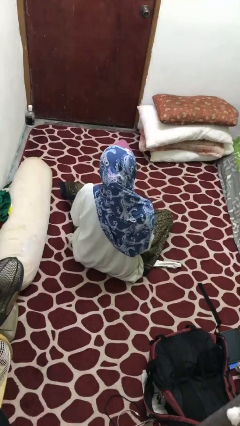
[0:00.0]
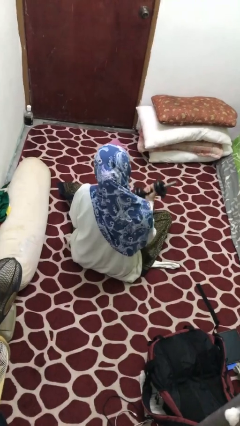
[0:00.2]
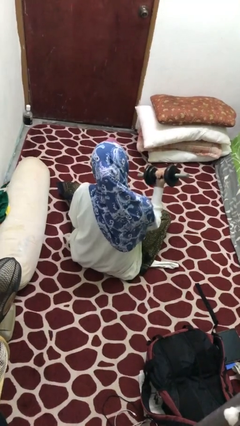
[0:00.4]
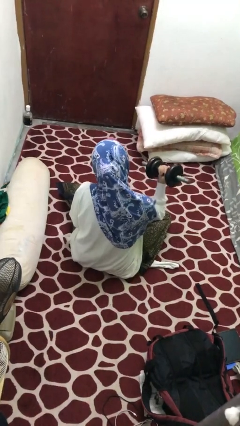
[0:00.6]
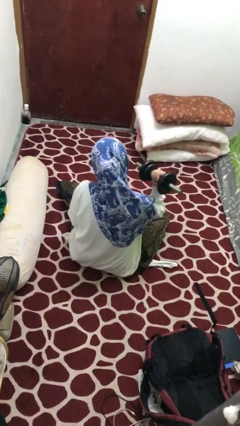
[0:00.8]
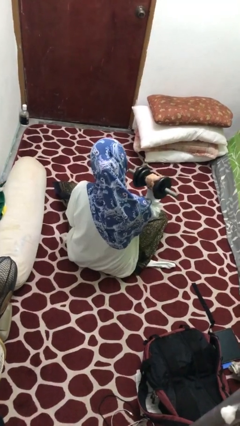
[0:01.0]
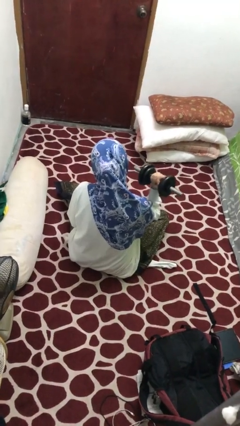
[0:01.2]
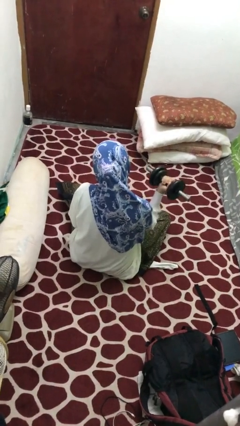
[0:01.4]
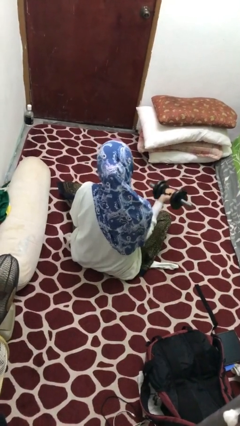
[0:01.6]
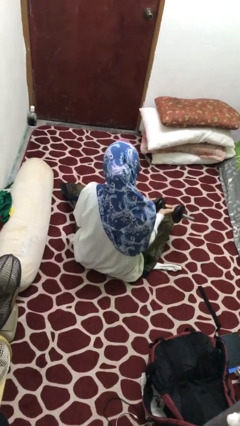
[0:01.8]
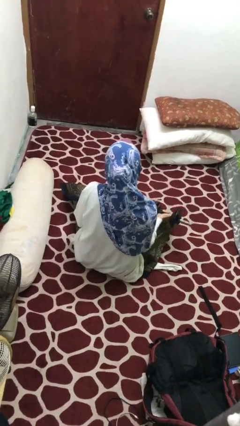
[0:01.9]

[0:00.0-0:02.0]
person lifts dumbbells

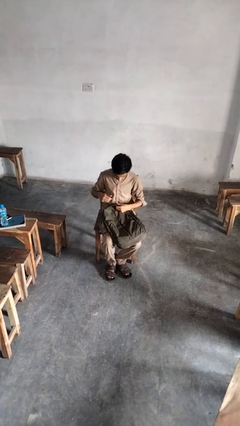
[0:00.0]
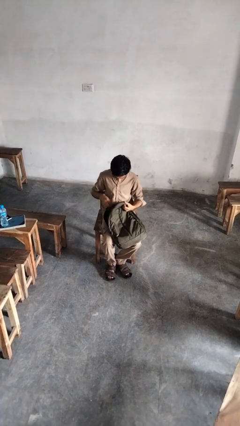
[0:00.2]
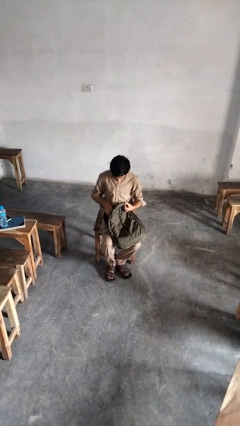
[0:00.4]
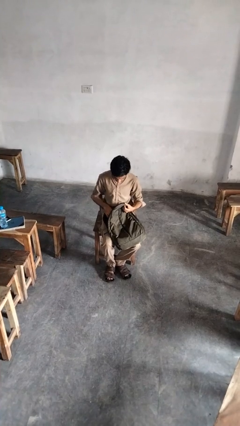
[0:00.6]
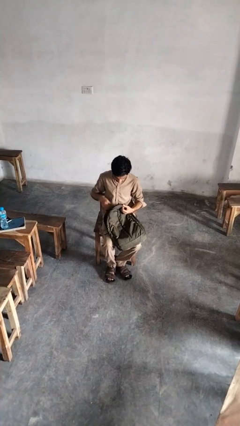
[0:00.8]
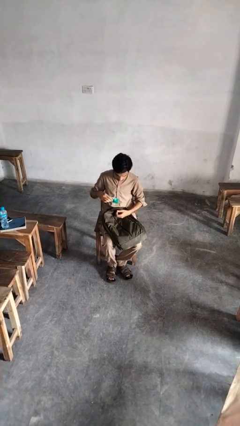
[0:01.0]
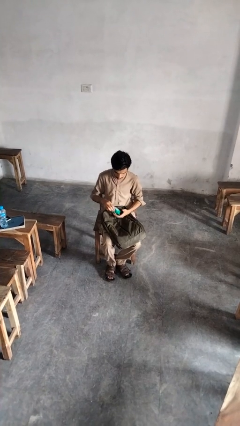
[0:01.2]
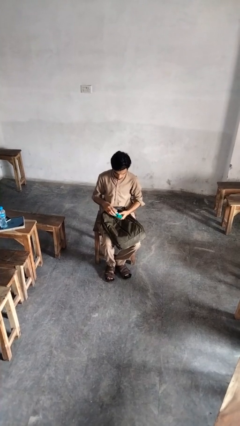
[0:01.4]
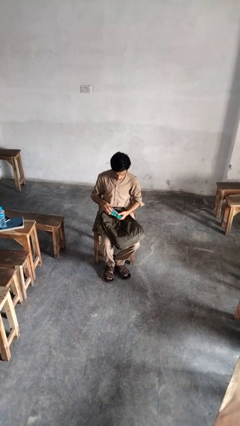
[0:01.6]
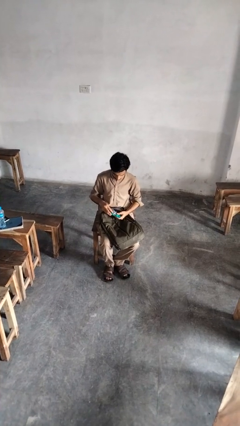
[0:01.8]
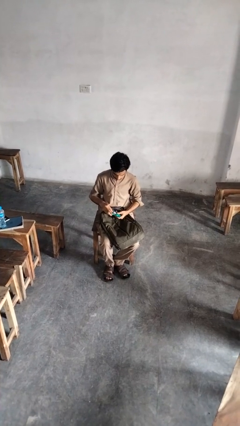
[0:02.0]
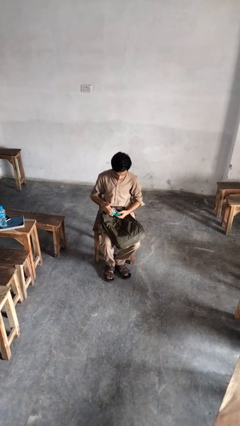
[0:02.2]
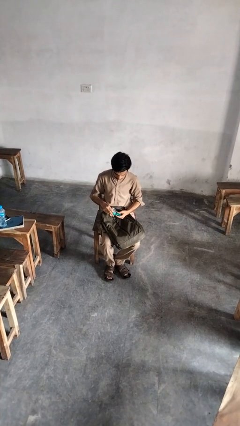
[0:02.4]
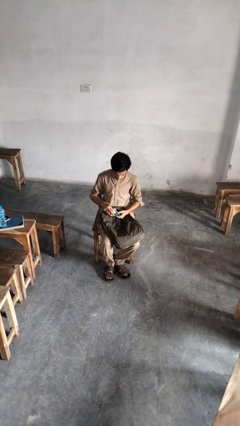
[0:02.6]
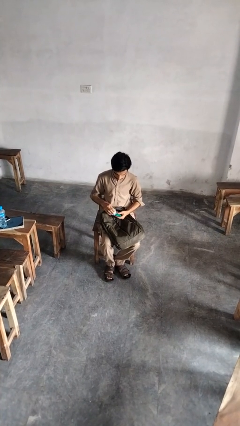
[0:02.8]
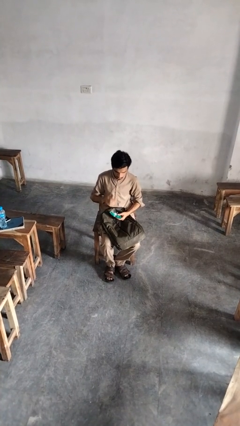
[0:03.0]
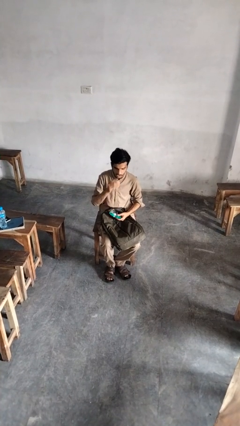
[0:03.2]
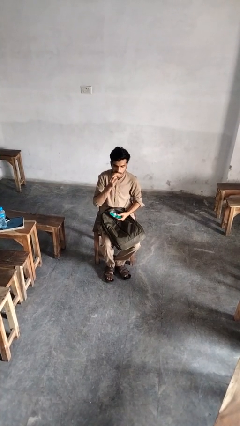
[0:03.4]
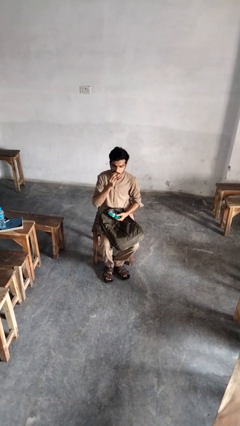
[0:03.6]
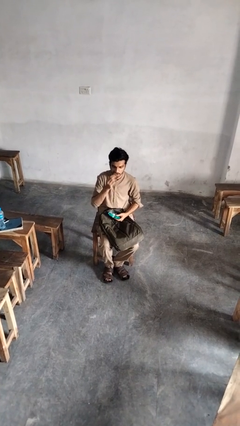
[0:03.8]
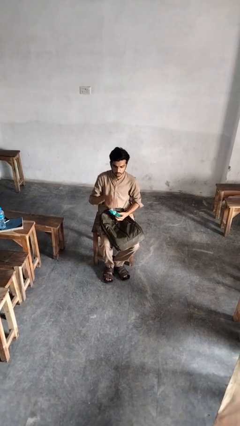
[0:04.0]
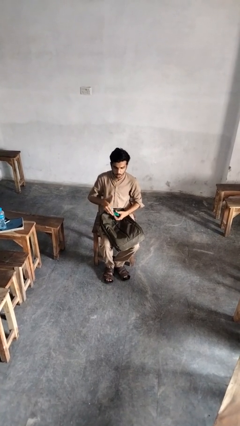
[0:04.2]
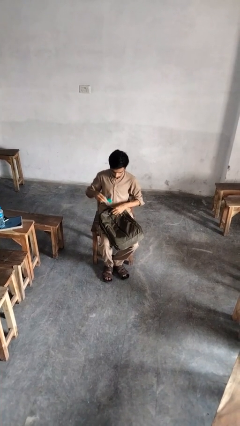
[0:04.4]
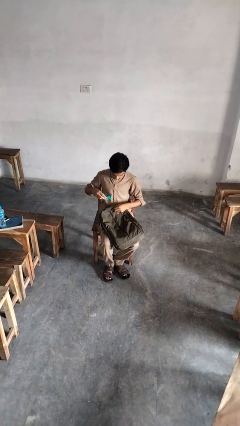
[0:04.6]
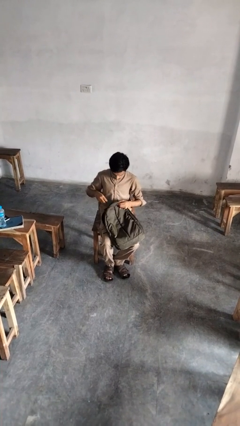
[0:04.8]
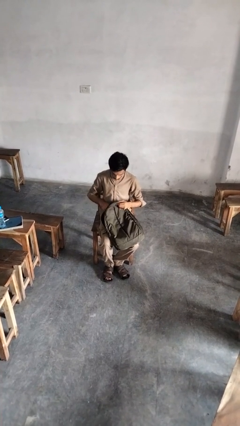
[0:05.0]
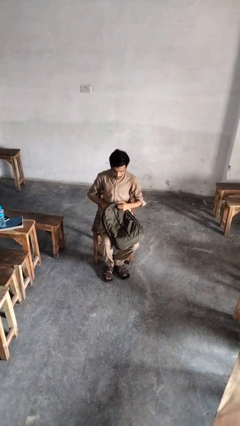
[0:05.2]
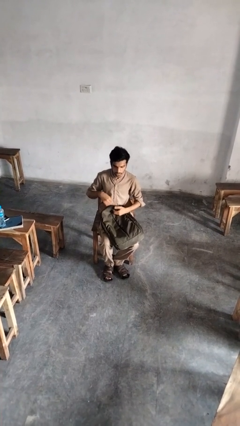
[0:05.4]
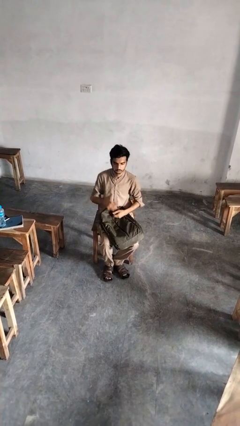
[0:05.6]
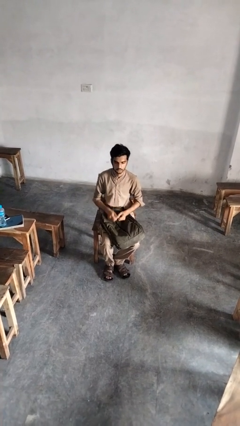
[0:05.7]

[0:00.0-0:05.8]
person eats snack from bag

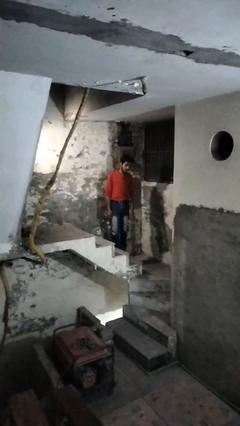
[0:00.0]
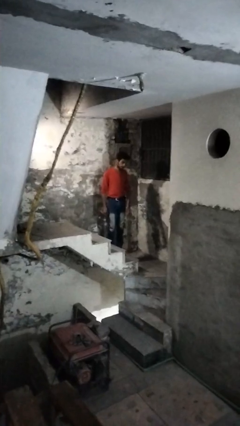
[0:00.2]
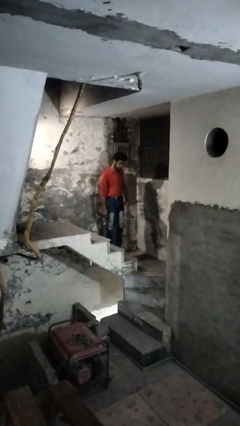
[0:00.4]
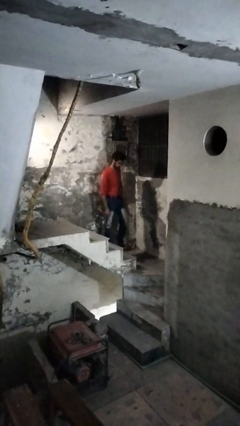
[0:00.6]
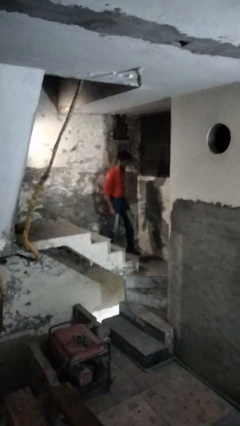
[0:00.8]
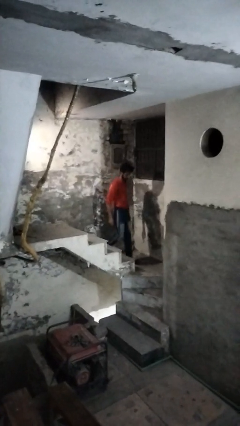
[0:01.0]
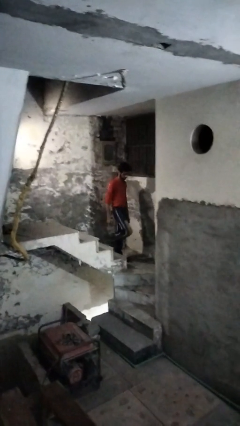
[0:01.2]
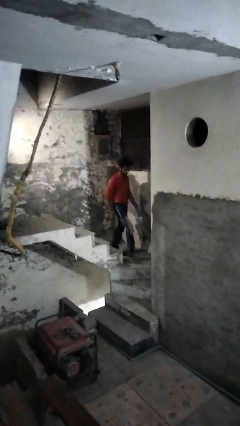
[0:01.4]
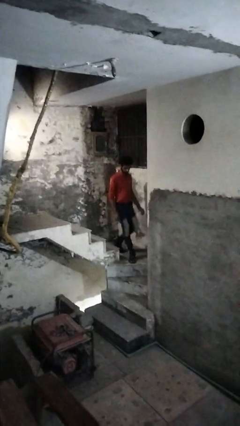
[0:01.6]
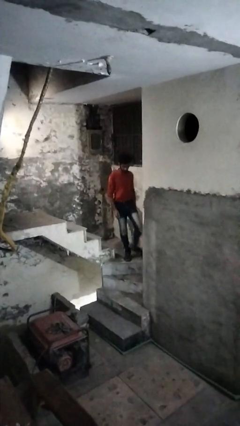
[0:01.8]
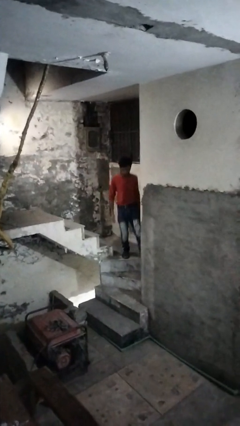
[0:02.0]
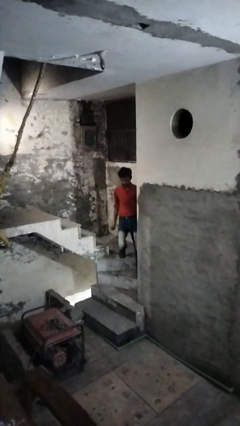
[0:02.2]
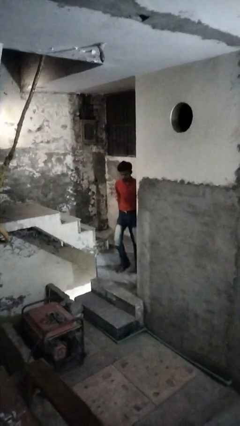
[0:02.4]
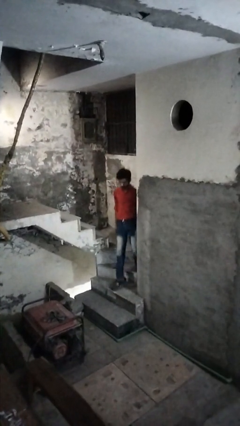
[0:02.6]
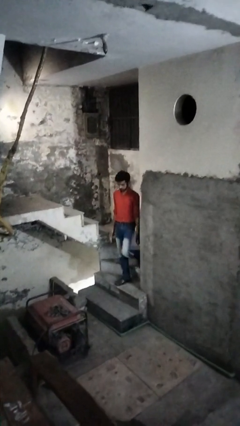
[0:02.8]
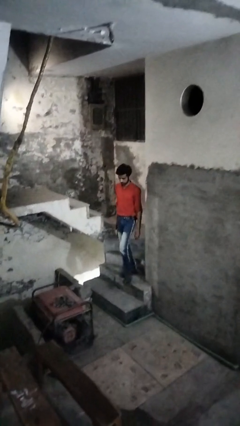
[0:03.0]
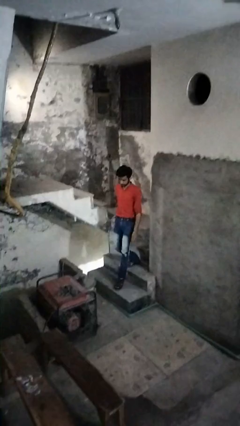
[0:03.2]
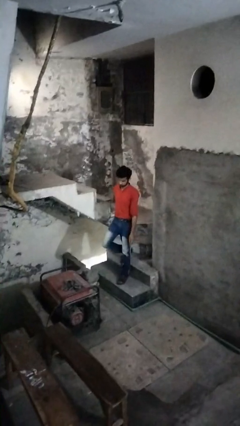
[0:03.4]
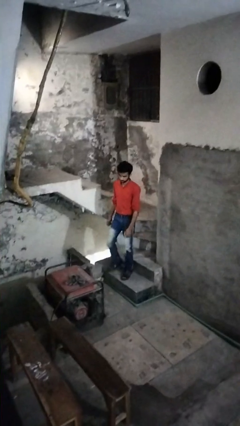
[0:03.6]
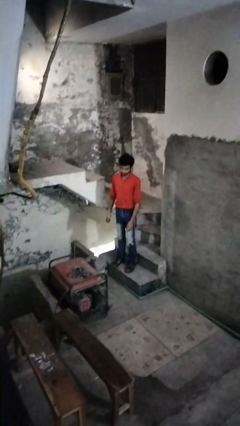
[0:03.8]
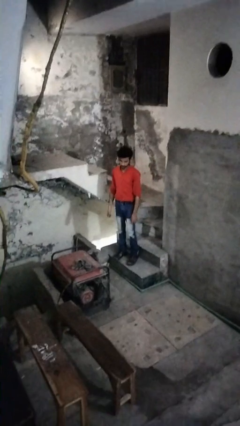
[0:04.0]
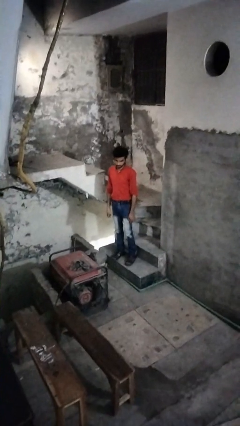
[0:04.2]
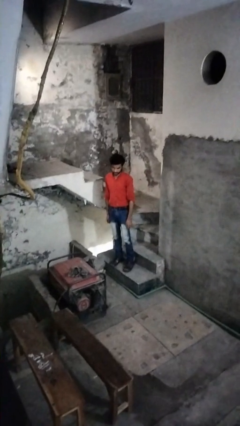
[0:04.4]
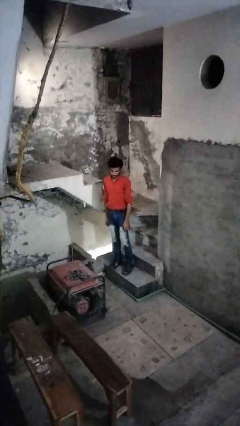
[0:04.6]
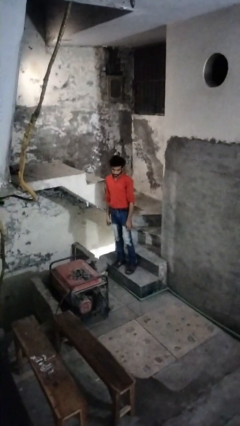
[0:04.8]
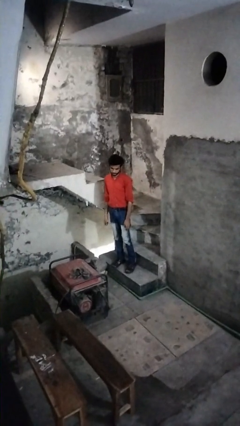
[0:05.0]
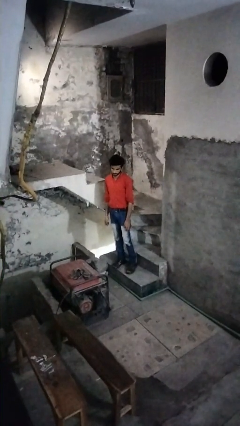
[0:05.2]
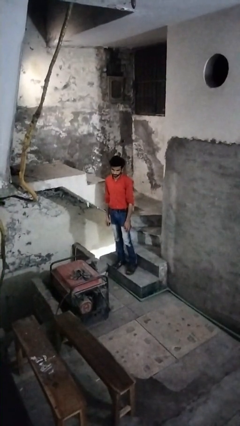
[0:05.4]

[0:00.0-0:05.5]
person climbs down stairs

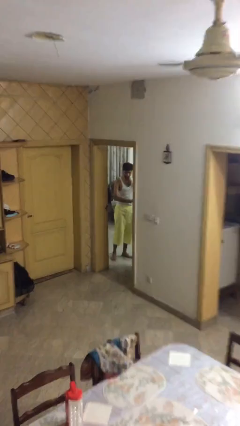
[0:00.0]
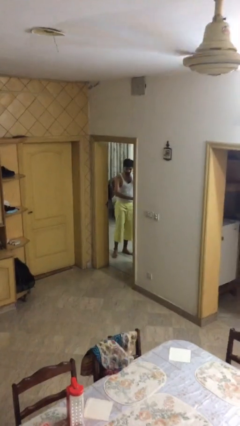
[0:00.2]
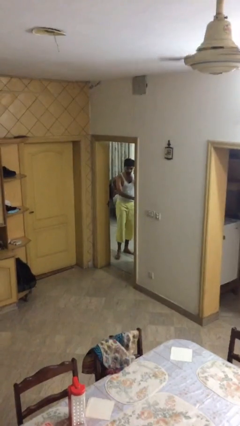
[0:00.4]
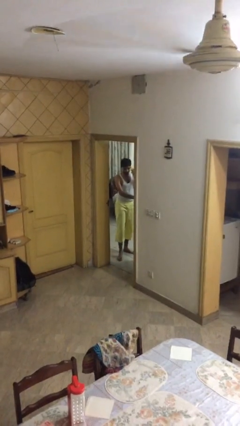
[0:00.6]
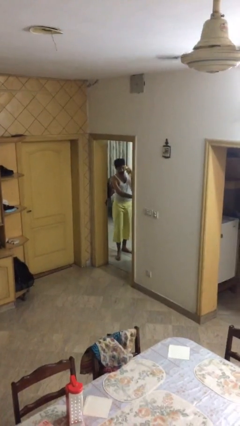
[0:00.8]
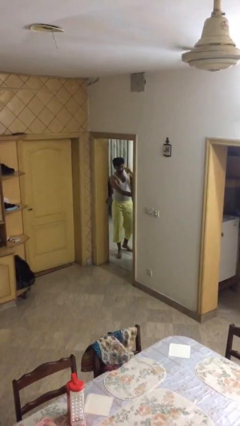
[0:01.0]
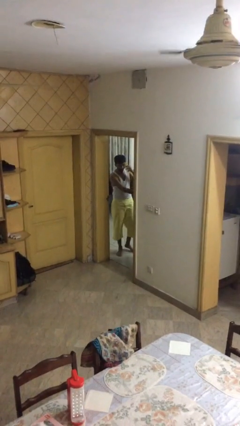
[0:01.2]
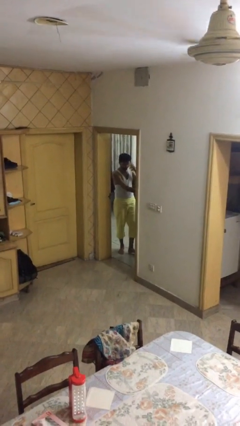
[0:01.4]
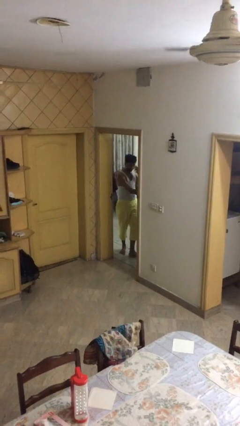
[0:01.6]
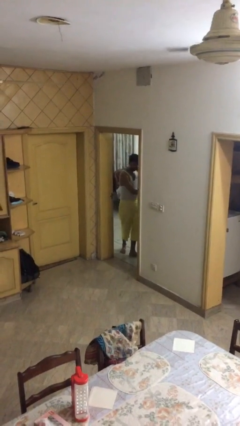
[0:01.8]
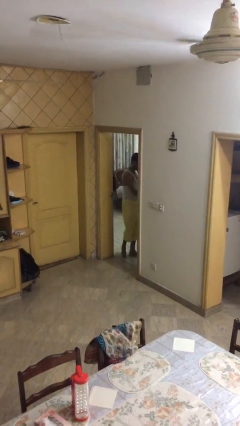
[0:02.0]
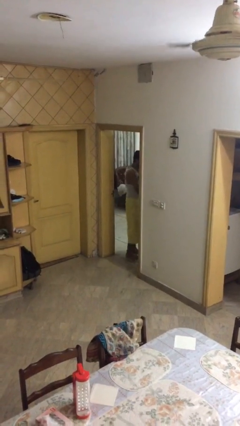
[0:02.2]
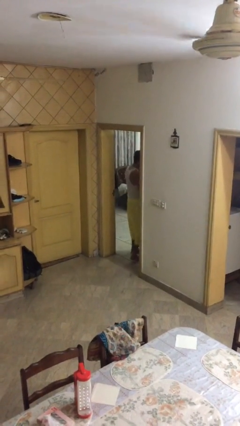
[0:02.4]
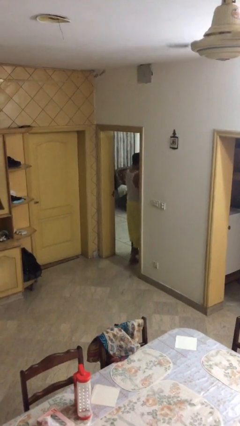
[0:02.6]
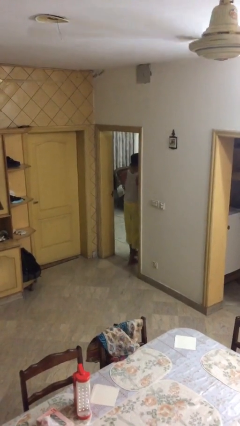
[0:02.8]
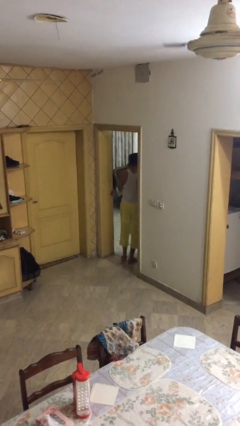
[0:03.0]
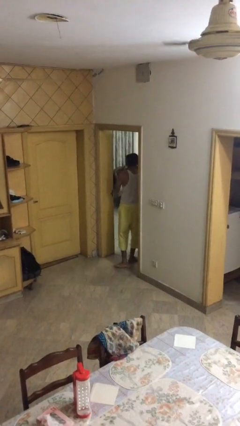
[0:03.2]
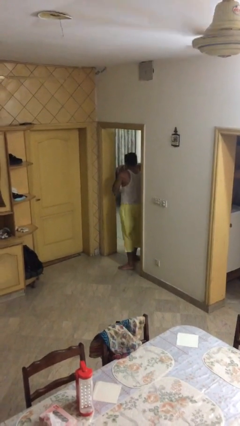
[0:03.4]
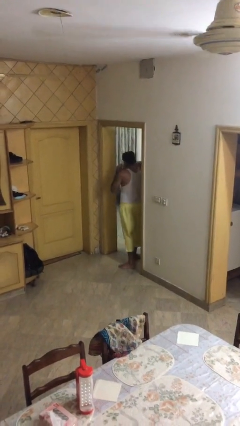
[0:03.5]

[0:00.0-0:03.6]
person enters scene through structure

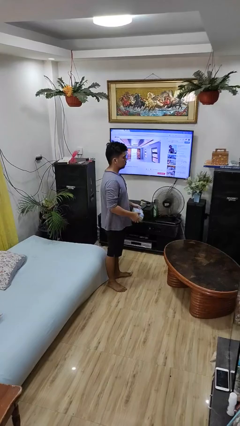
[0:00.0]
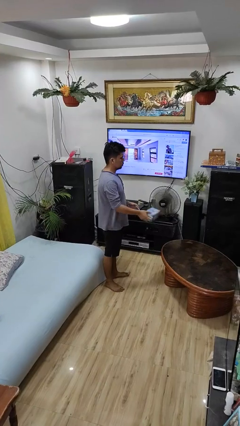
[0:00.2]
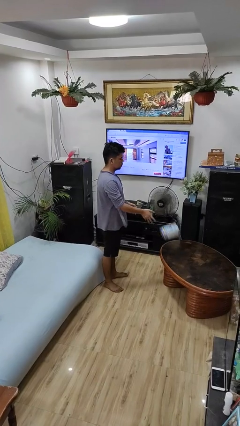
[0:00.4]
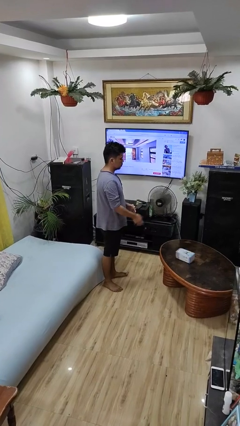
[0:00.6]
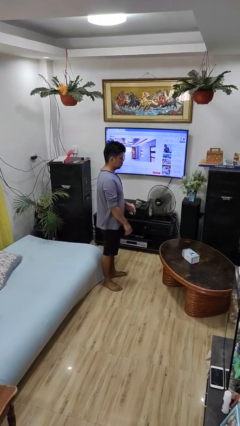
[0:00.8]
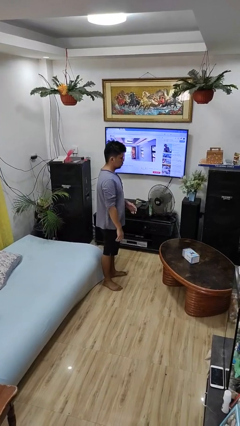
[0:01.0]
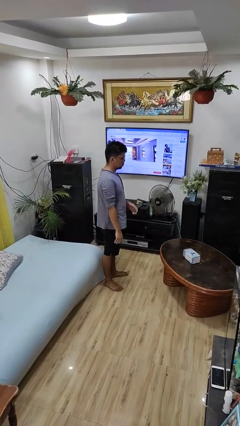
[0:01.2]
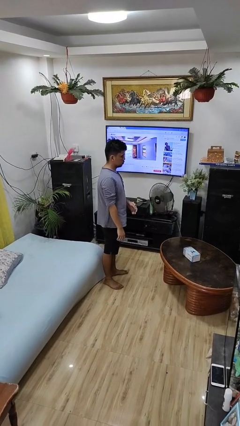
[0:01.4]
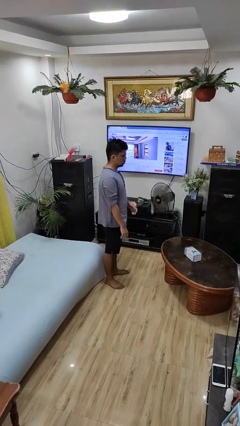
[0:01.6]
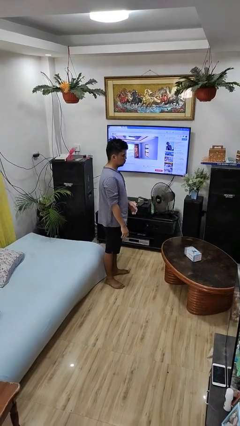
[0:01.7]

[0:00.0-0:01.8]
person throws object on table
